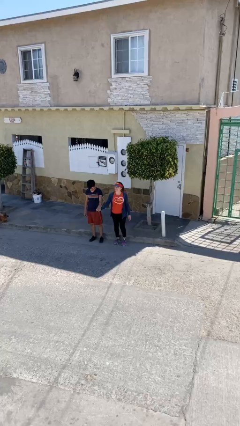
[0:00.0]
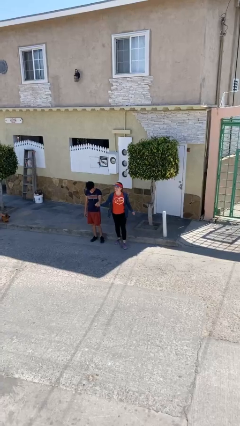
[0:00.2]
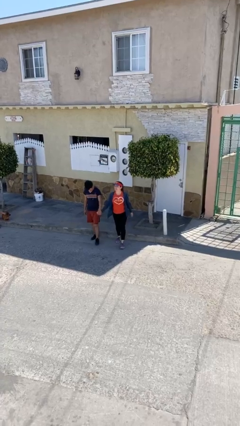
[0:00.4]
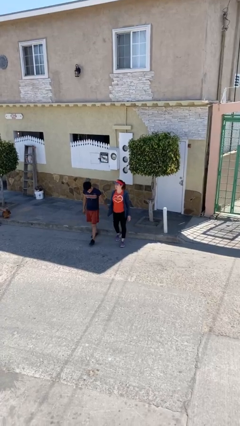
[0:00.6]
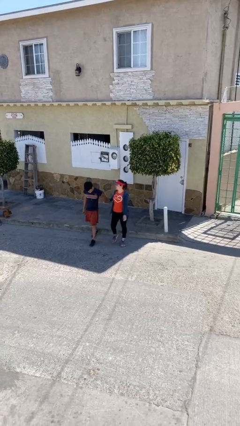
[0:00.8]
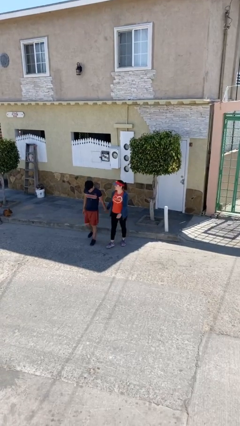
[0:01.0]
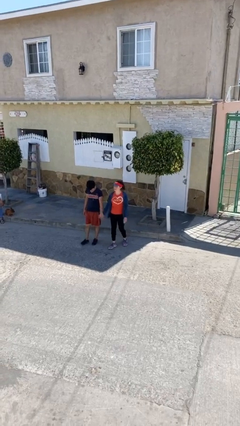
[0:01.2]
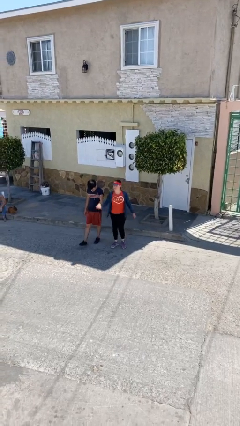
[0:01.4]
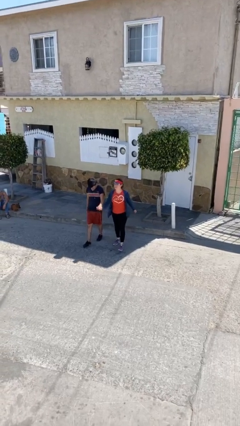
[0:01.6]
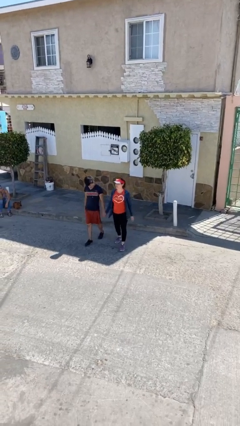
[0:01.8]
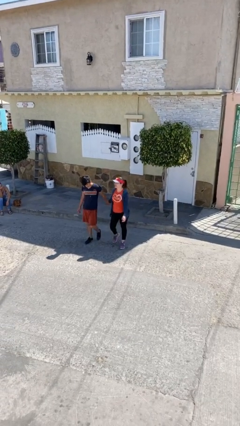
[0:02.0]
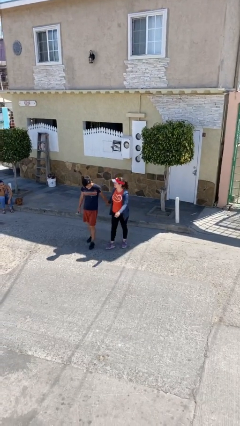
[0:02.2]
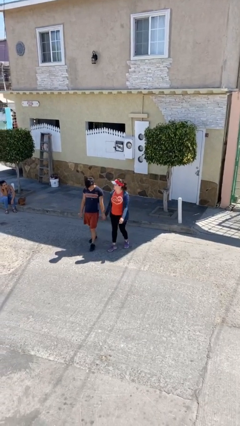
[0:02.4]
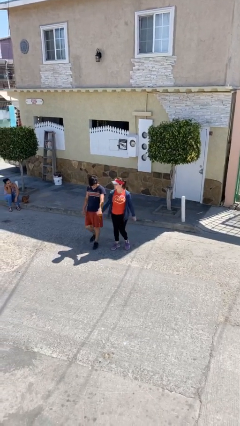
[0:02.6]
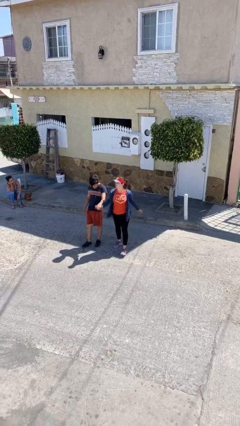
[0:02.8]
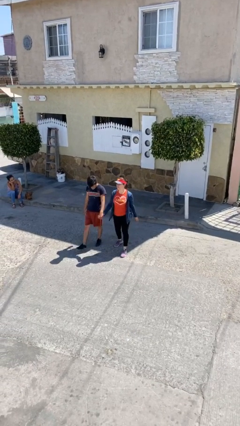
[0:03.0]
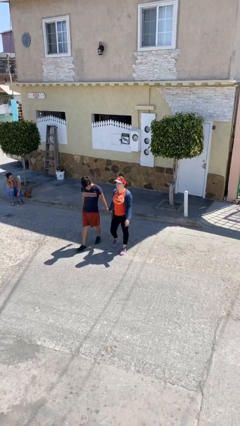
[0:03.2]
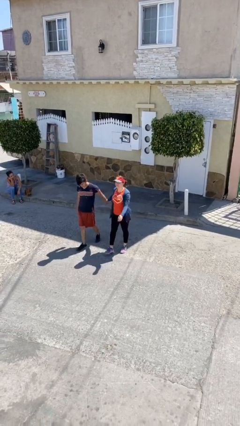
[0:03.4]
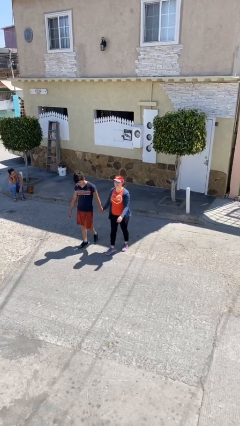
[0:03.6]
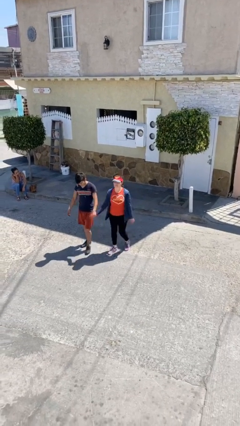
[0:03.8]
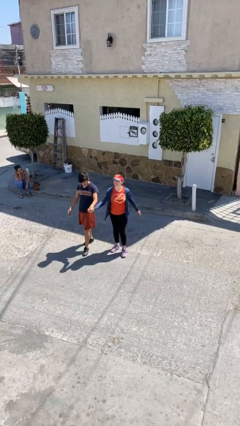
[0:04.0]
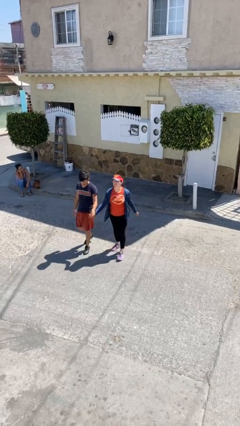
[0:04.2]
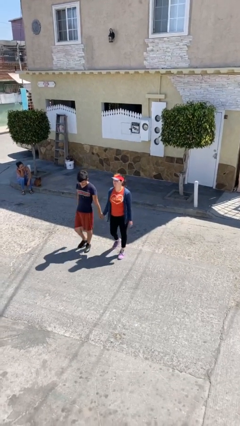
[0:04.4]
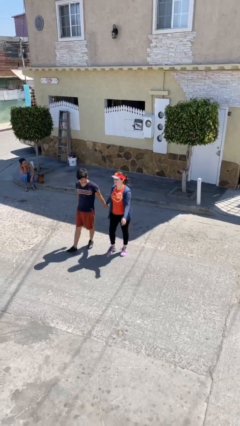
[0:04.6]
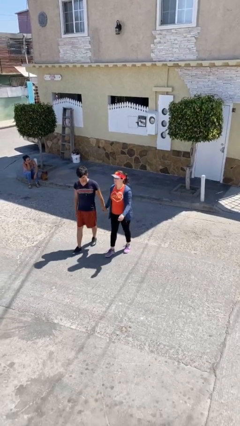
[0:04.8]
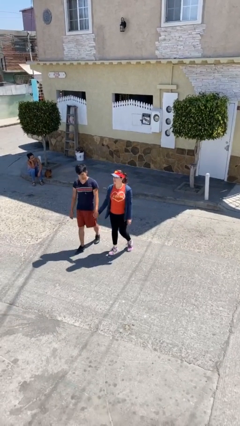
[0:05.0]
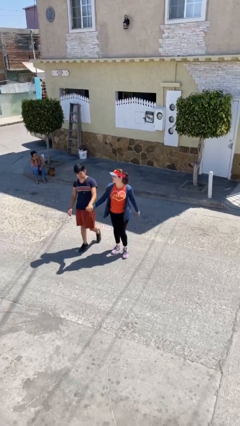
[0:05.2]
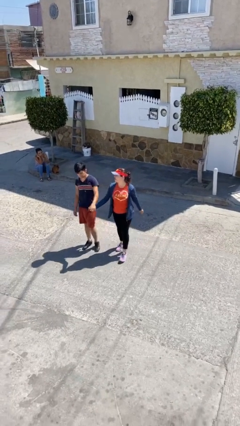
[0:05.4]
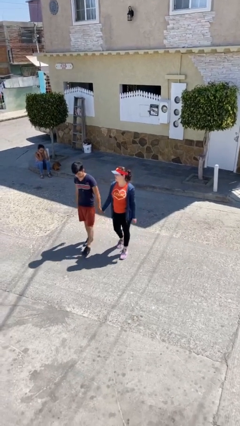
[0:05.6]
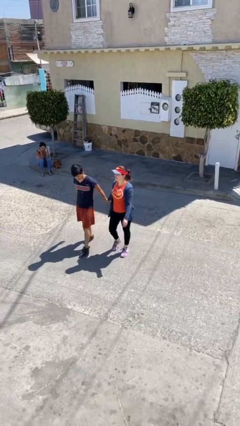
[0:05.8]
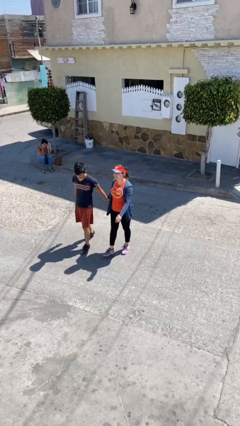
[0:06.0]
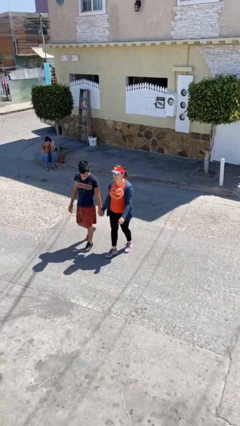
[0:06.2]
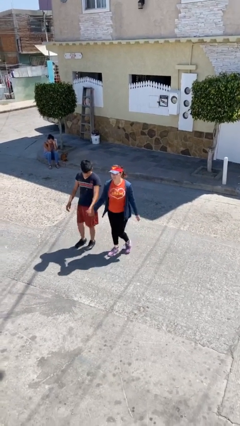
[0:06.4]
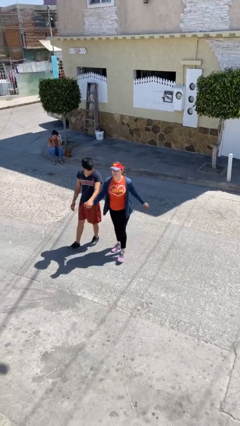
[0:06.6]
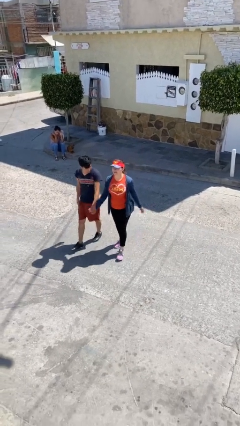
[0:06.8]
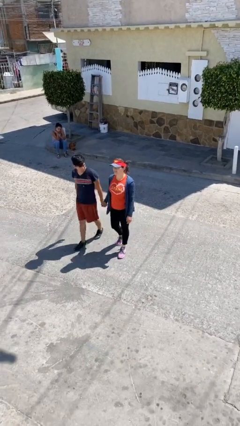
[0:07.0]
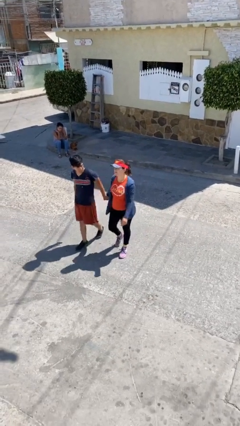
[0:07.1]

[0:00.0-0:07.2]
person holds hand

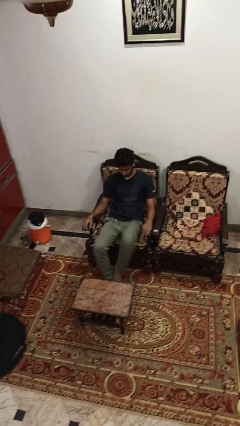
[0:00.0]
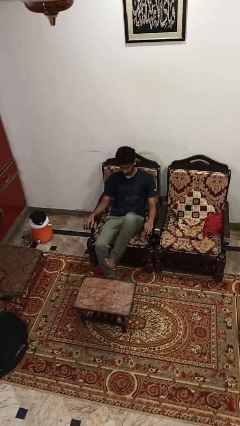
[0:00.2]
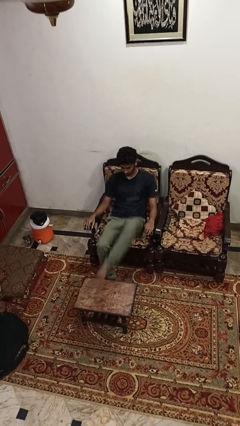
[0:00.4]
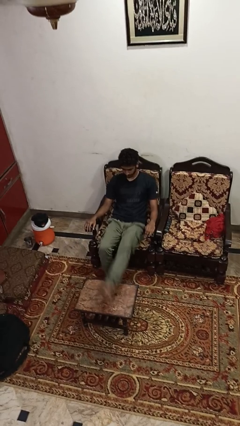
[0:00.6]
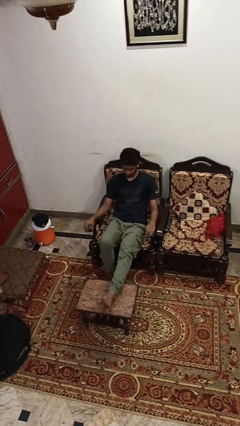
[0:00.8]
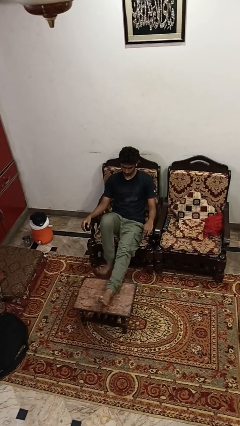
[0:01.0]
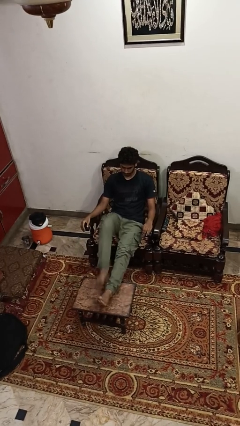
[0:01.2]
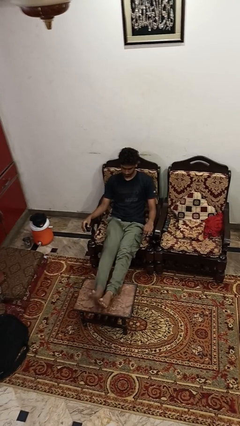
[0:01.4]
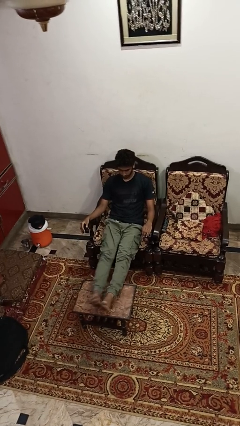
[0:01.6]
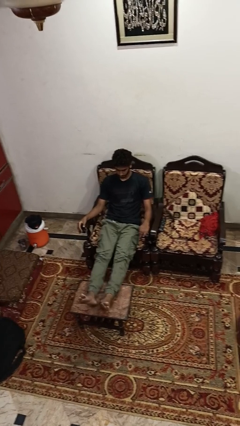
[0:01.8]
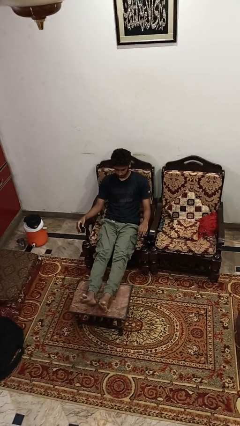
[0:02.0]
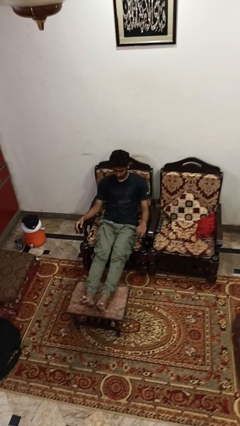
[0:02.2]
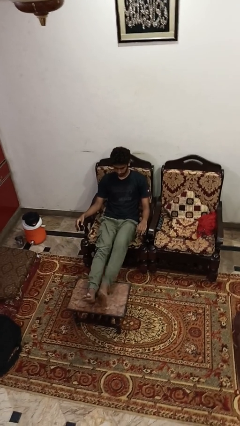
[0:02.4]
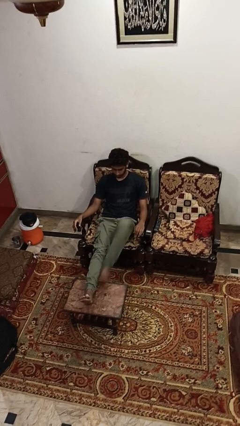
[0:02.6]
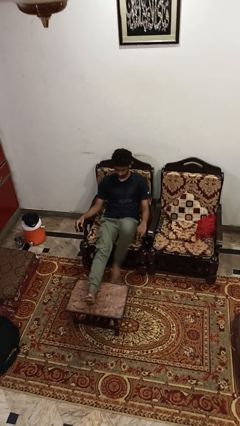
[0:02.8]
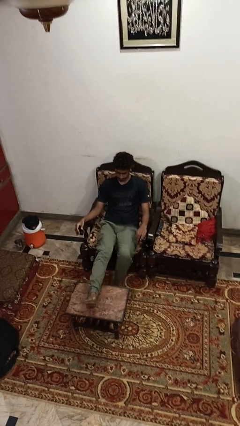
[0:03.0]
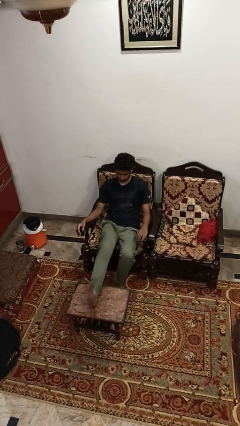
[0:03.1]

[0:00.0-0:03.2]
person puts feet up

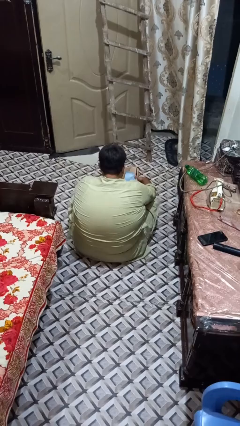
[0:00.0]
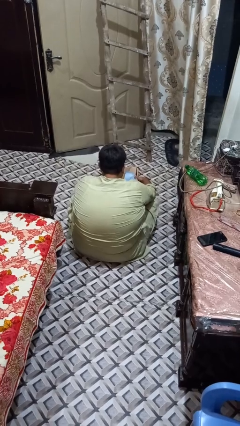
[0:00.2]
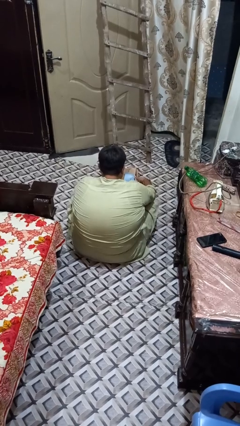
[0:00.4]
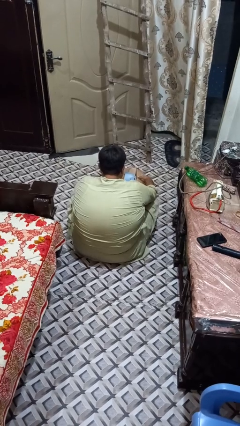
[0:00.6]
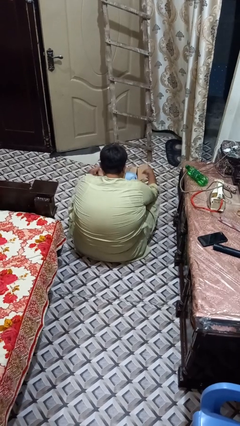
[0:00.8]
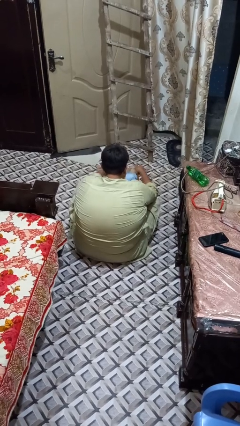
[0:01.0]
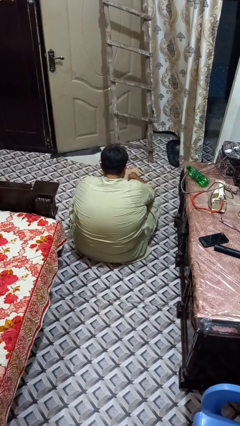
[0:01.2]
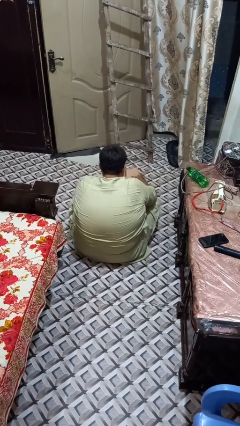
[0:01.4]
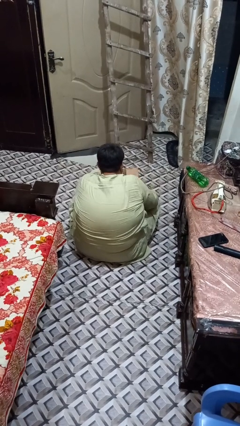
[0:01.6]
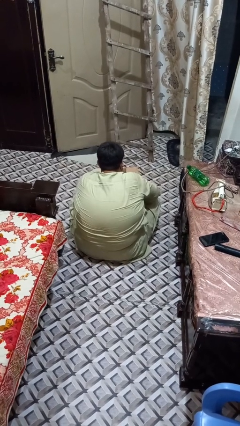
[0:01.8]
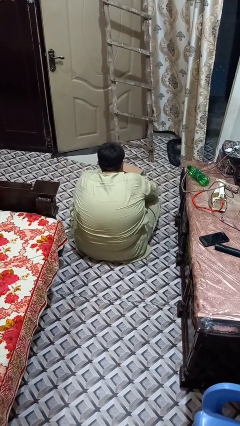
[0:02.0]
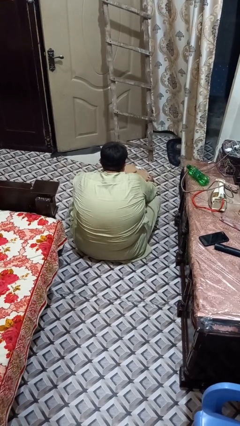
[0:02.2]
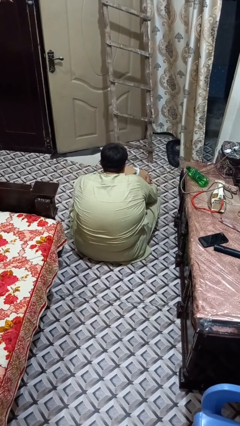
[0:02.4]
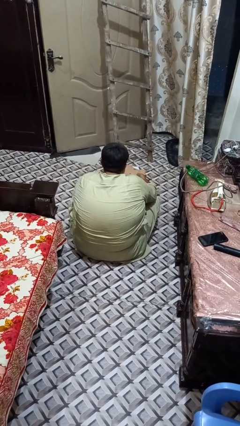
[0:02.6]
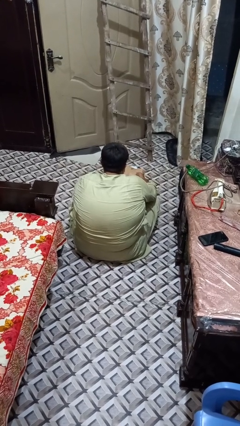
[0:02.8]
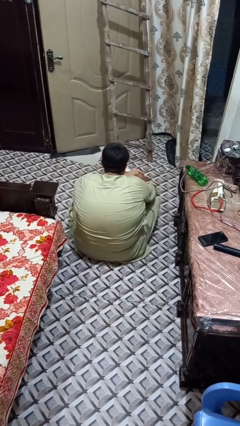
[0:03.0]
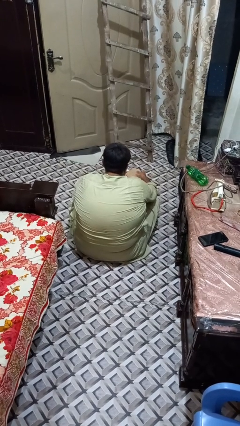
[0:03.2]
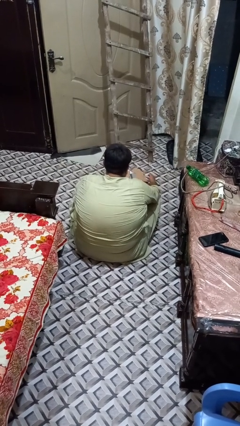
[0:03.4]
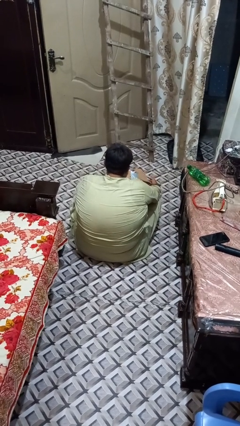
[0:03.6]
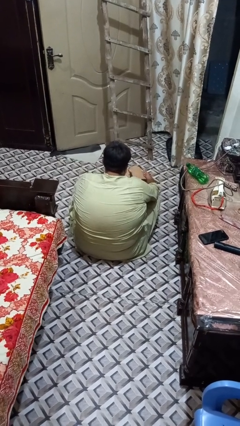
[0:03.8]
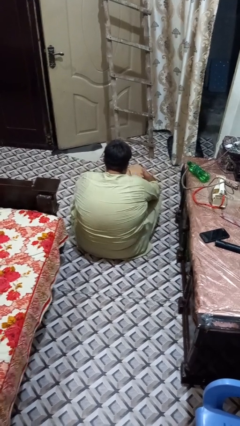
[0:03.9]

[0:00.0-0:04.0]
person closes box

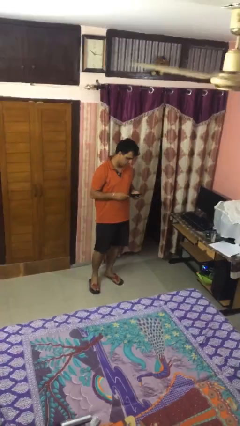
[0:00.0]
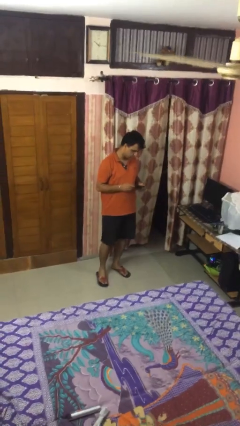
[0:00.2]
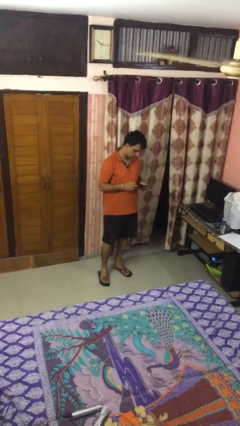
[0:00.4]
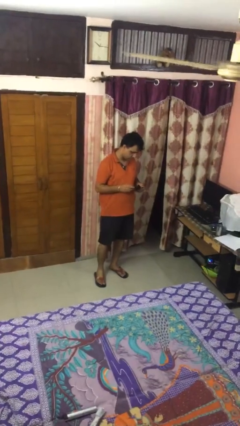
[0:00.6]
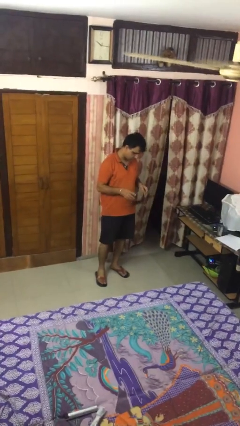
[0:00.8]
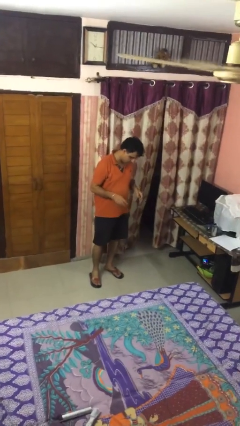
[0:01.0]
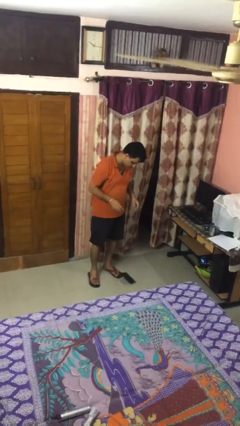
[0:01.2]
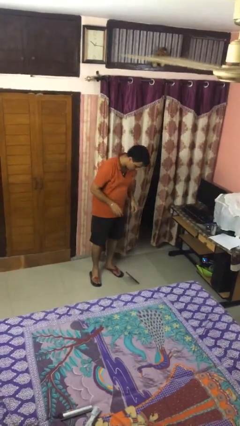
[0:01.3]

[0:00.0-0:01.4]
person drops object

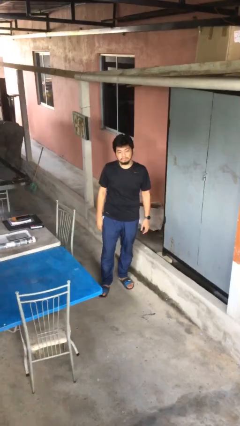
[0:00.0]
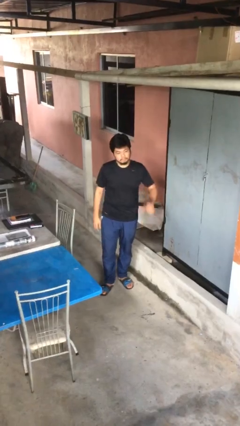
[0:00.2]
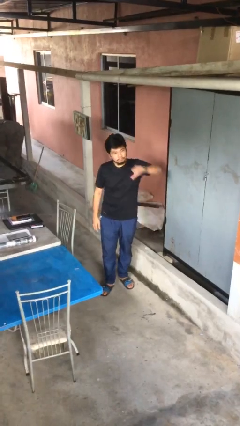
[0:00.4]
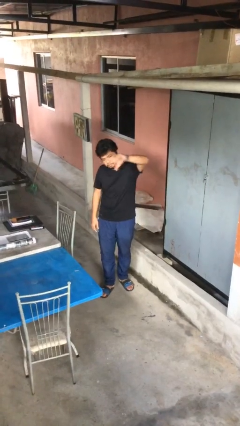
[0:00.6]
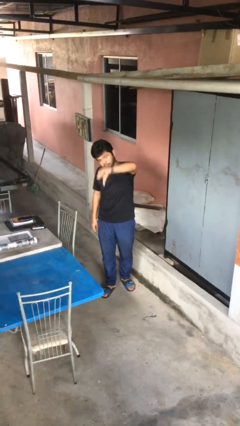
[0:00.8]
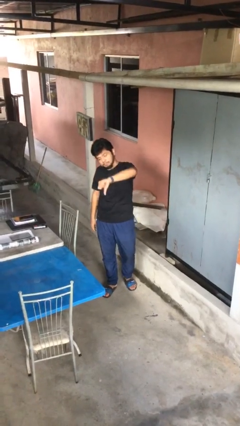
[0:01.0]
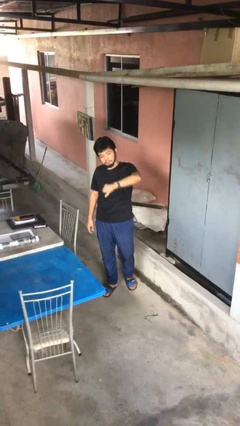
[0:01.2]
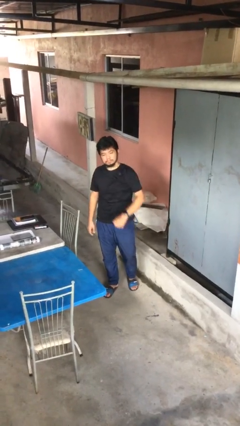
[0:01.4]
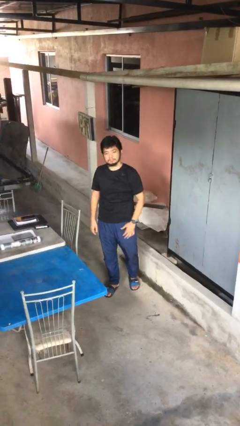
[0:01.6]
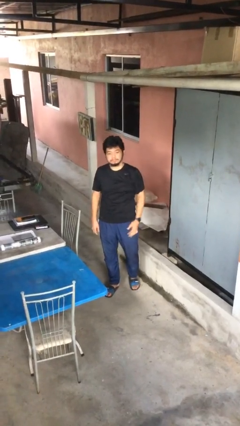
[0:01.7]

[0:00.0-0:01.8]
person gestures thumbs down
